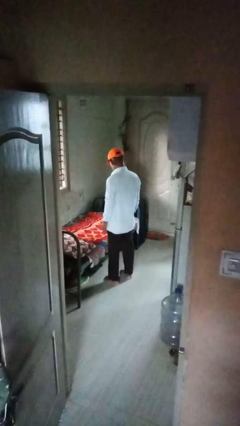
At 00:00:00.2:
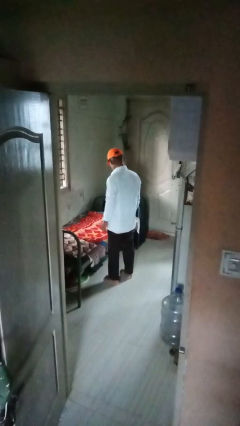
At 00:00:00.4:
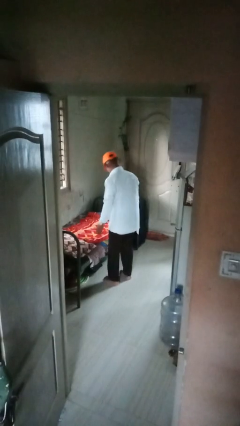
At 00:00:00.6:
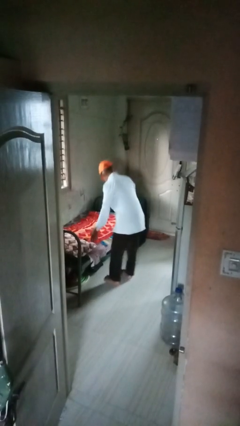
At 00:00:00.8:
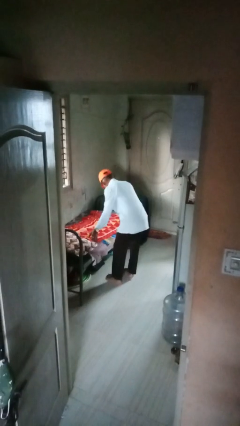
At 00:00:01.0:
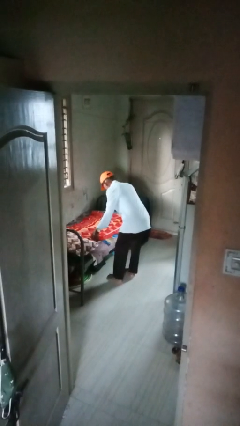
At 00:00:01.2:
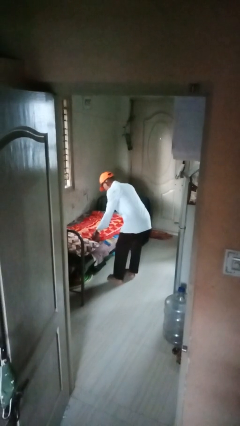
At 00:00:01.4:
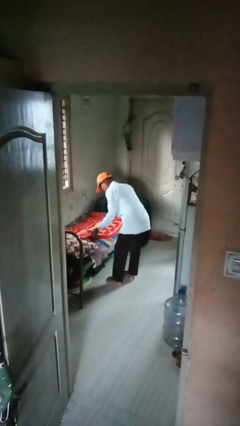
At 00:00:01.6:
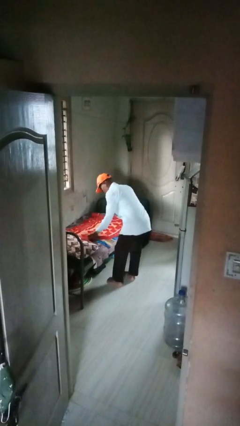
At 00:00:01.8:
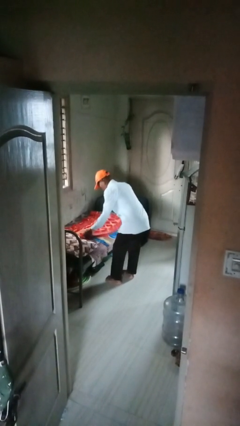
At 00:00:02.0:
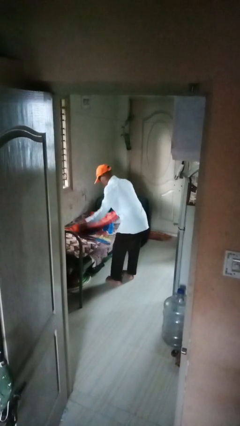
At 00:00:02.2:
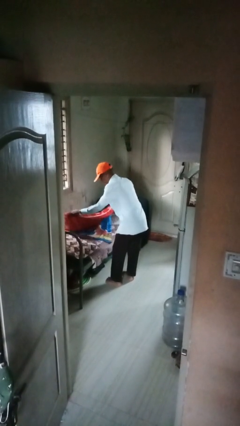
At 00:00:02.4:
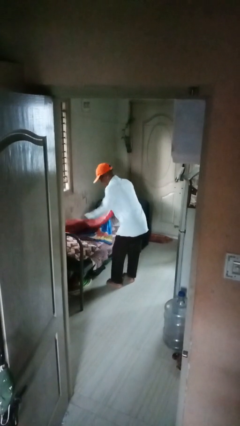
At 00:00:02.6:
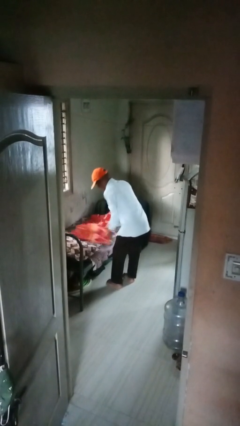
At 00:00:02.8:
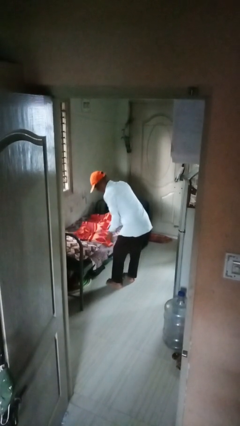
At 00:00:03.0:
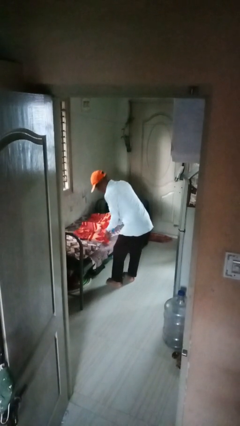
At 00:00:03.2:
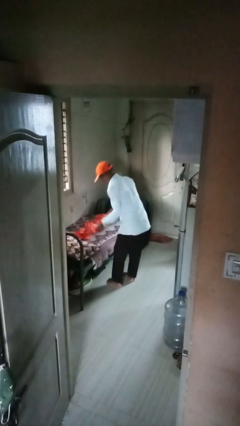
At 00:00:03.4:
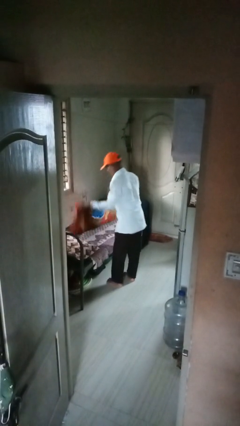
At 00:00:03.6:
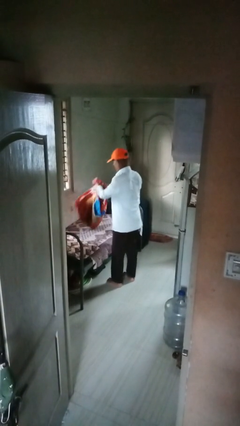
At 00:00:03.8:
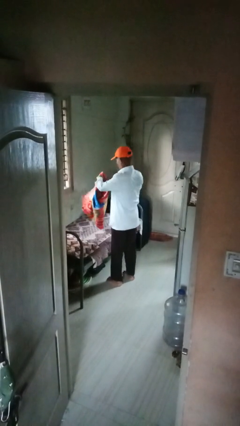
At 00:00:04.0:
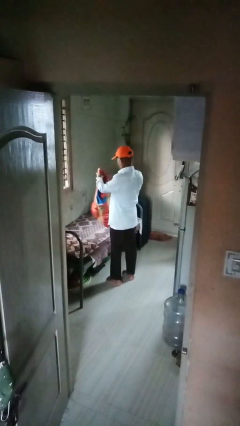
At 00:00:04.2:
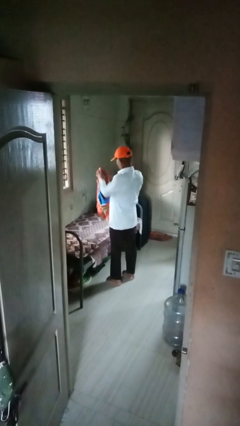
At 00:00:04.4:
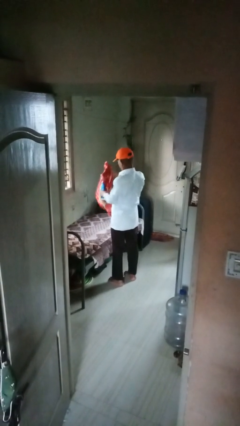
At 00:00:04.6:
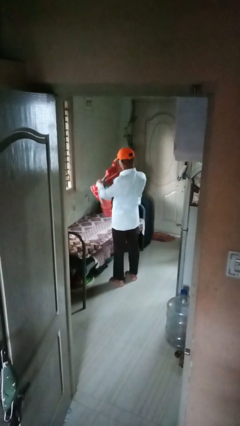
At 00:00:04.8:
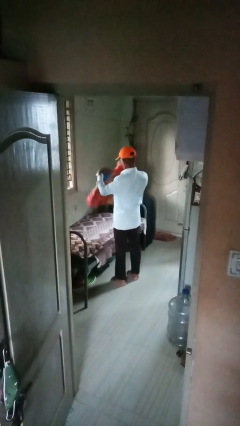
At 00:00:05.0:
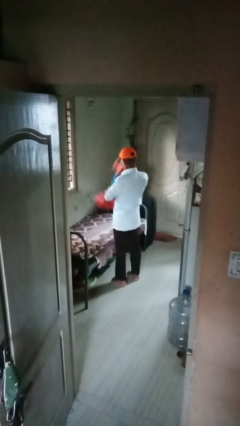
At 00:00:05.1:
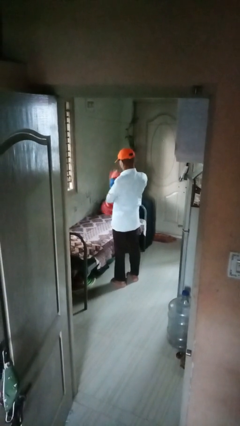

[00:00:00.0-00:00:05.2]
person folds blanket

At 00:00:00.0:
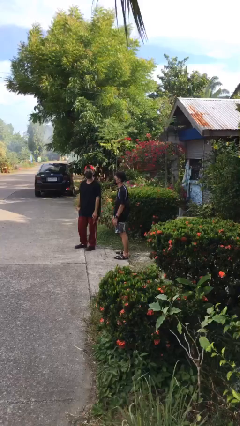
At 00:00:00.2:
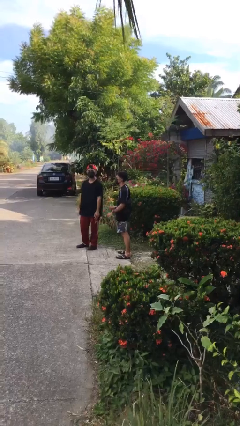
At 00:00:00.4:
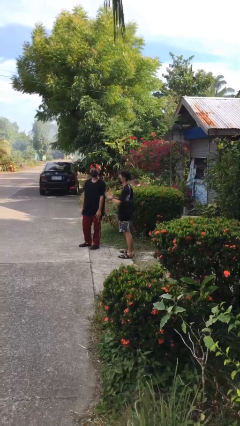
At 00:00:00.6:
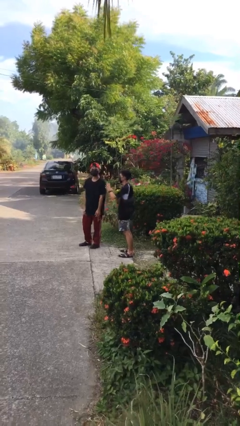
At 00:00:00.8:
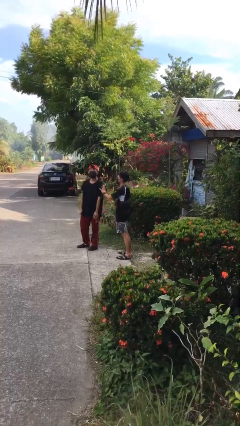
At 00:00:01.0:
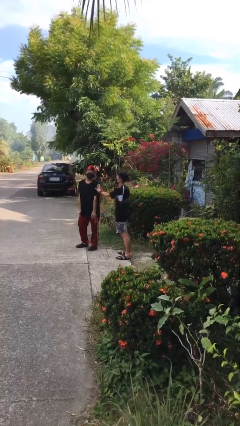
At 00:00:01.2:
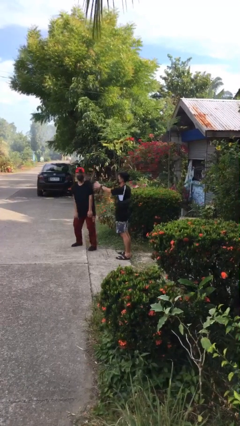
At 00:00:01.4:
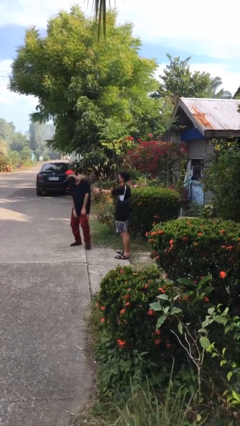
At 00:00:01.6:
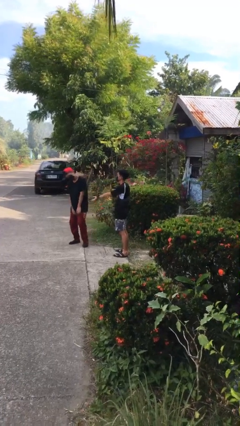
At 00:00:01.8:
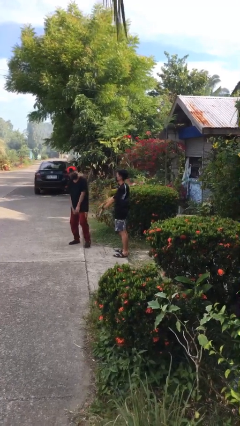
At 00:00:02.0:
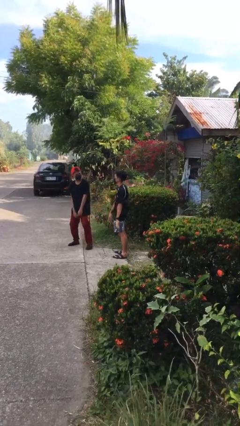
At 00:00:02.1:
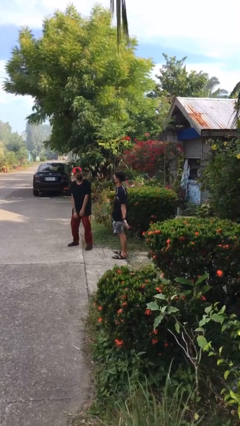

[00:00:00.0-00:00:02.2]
person shoves person

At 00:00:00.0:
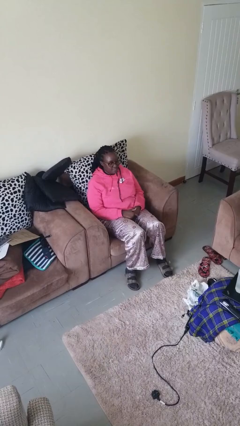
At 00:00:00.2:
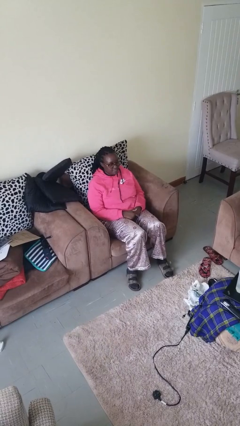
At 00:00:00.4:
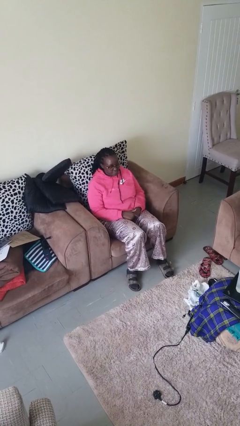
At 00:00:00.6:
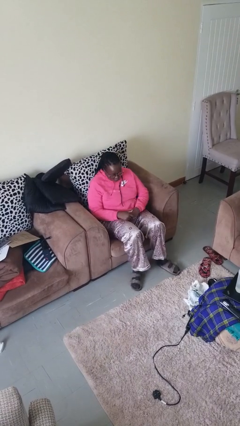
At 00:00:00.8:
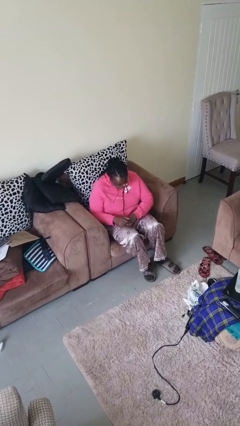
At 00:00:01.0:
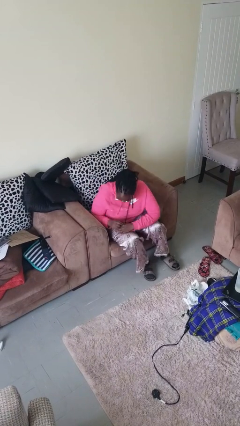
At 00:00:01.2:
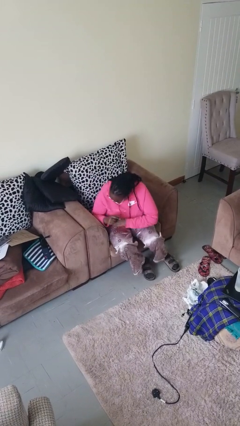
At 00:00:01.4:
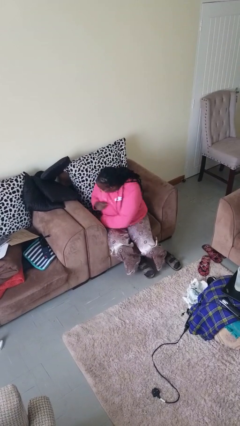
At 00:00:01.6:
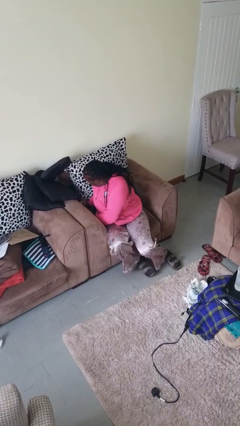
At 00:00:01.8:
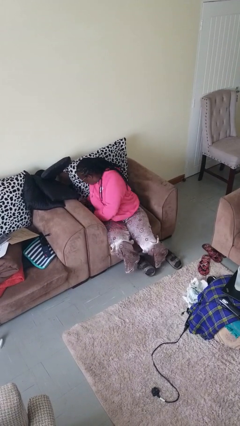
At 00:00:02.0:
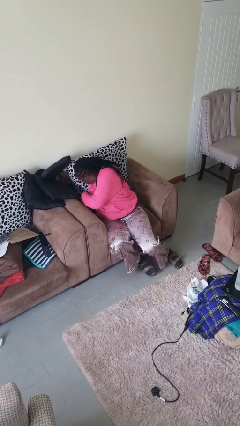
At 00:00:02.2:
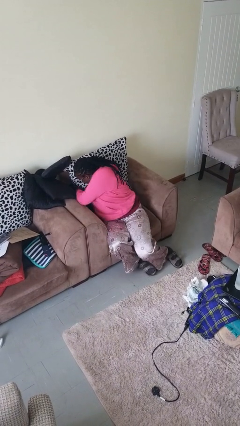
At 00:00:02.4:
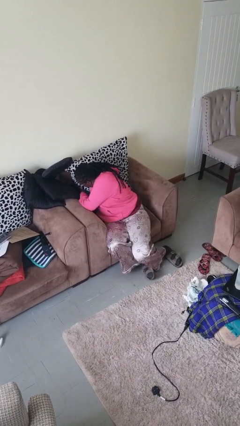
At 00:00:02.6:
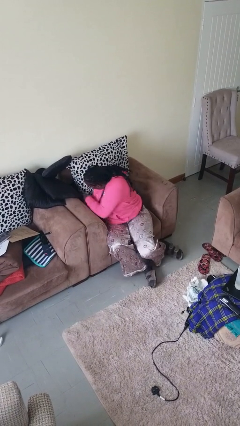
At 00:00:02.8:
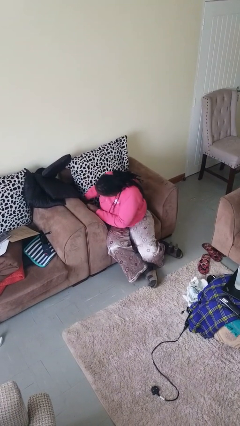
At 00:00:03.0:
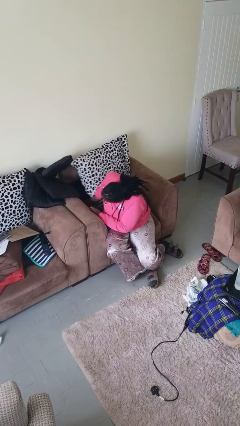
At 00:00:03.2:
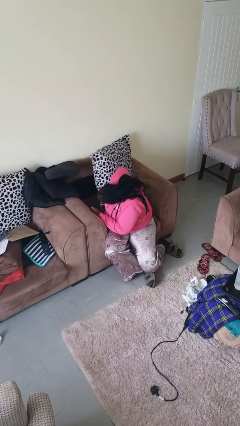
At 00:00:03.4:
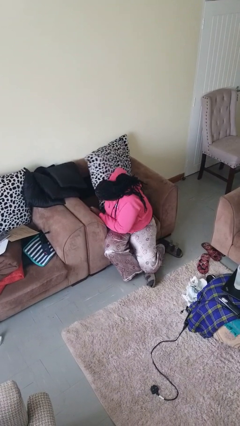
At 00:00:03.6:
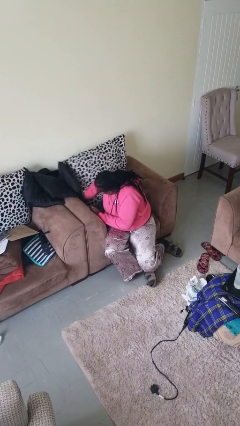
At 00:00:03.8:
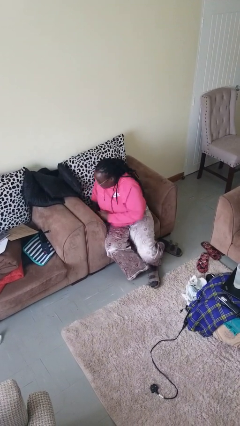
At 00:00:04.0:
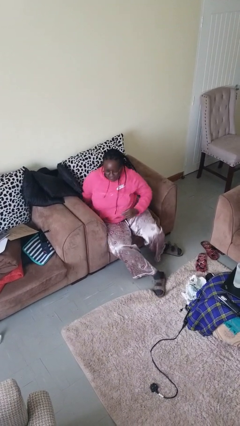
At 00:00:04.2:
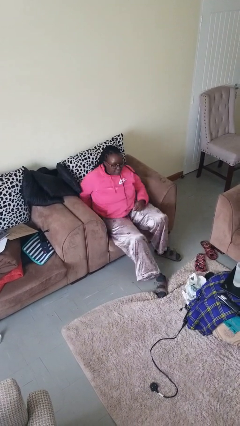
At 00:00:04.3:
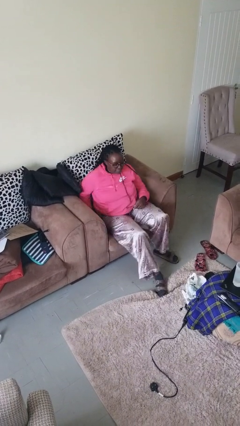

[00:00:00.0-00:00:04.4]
person searches in couch

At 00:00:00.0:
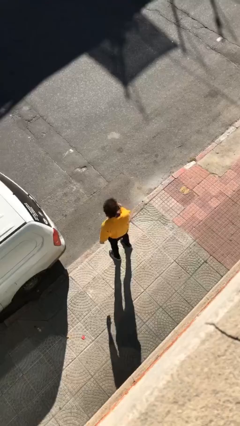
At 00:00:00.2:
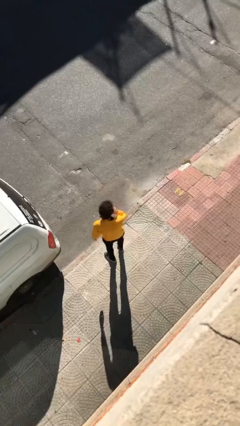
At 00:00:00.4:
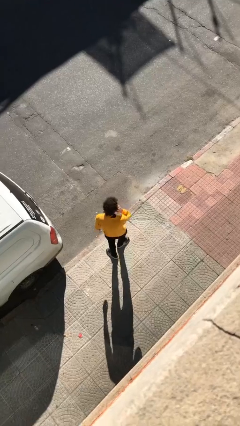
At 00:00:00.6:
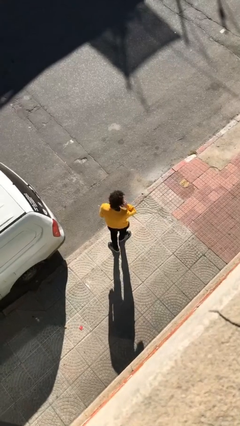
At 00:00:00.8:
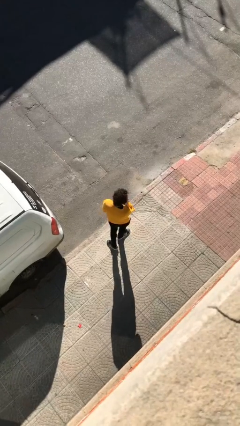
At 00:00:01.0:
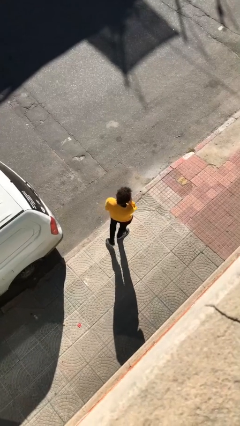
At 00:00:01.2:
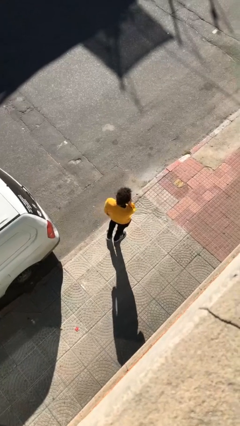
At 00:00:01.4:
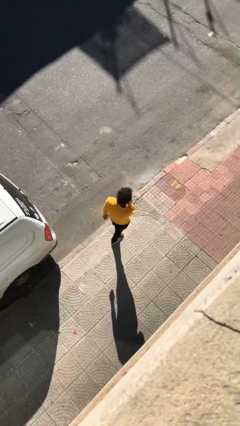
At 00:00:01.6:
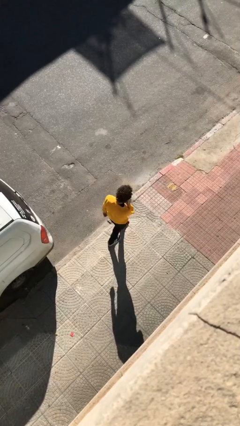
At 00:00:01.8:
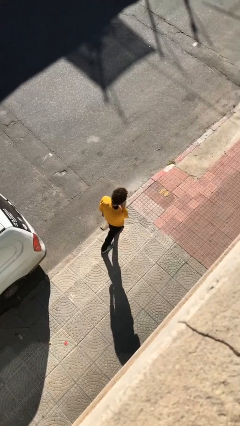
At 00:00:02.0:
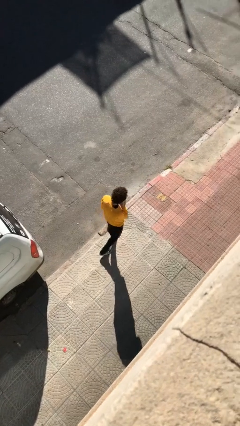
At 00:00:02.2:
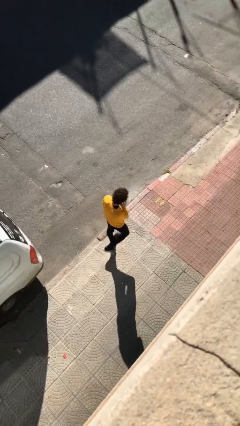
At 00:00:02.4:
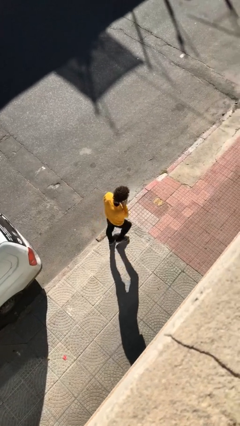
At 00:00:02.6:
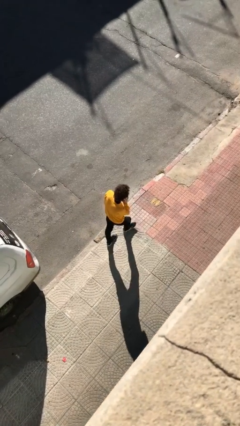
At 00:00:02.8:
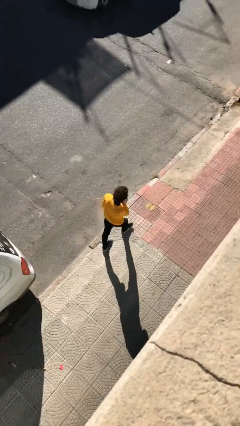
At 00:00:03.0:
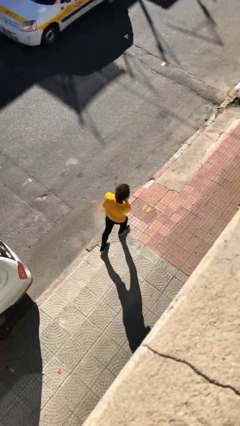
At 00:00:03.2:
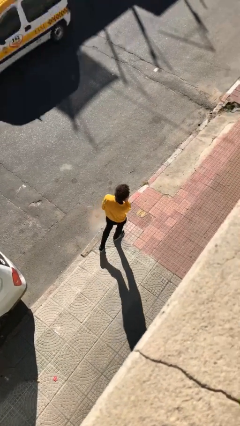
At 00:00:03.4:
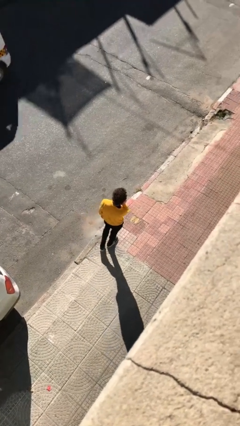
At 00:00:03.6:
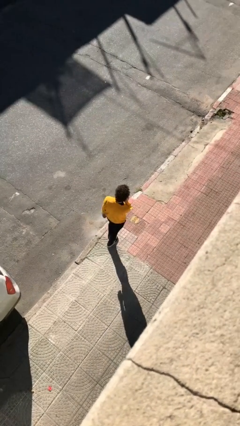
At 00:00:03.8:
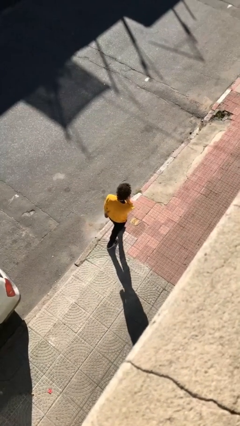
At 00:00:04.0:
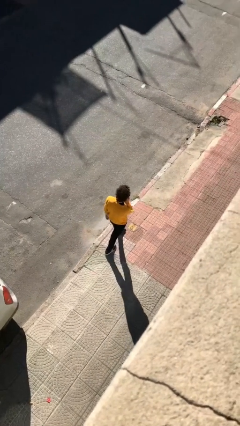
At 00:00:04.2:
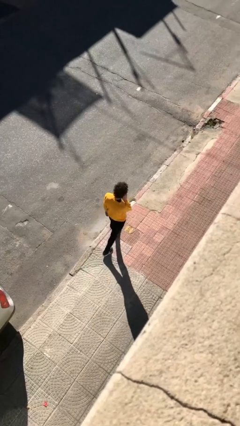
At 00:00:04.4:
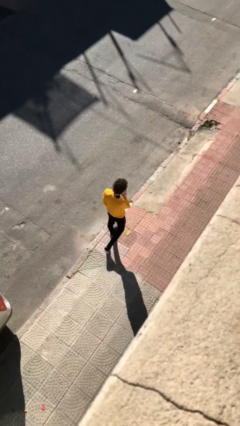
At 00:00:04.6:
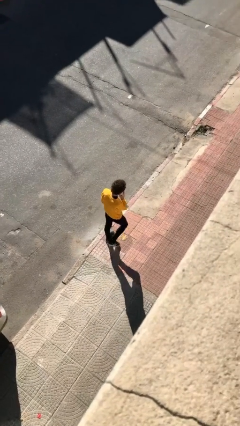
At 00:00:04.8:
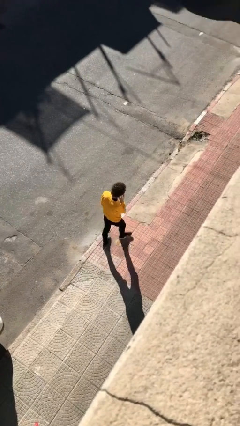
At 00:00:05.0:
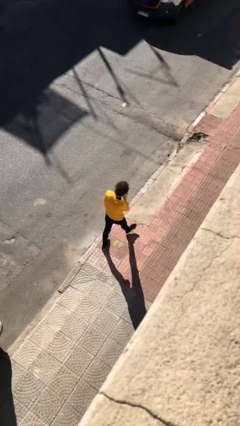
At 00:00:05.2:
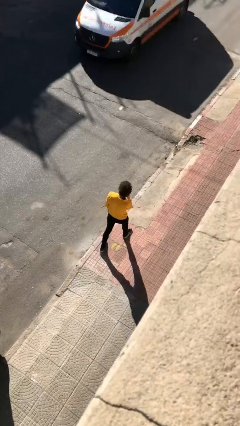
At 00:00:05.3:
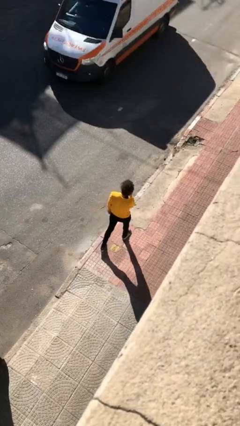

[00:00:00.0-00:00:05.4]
person talks on phone

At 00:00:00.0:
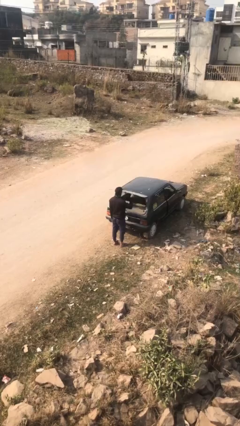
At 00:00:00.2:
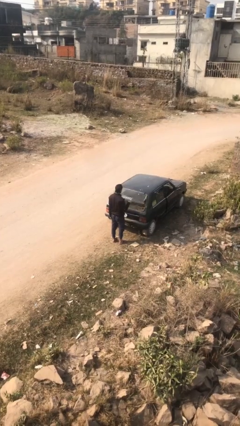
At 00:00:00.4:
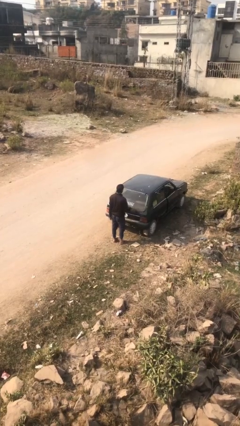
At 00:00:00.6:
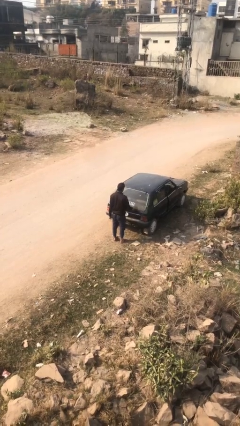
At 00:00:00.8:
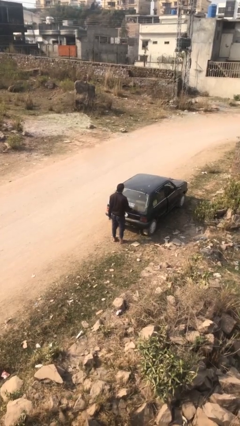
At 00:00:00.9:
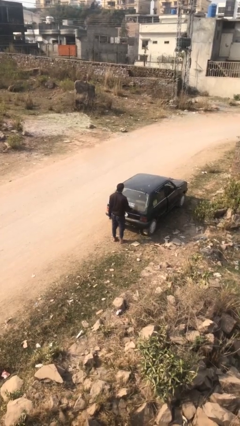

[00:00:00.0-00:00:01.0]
person closes car trunk
